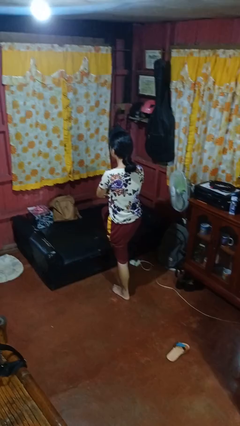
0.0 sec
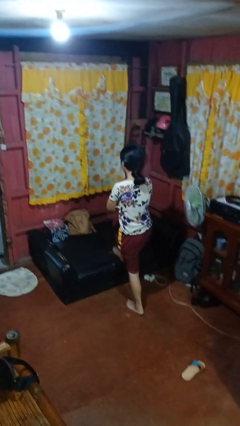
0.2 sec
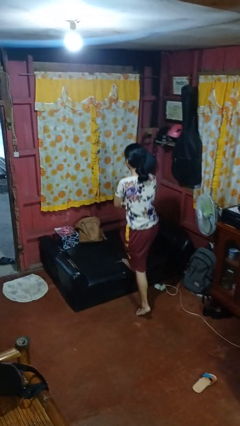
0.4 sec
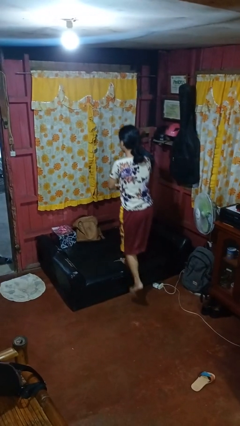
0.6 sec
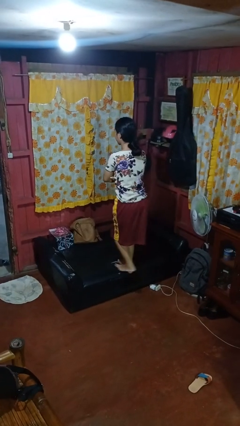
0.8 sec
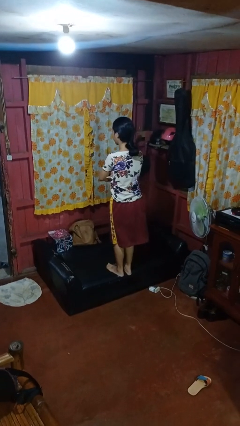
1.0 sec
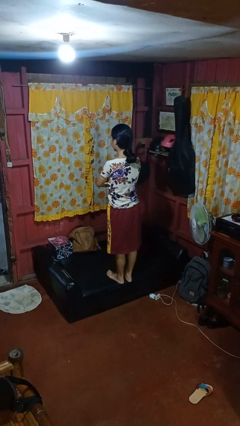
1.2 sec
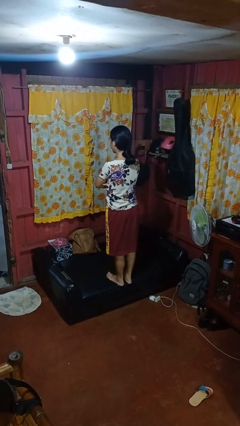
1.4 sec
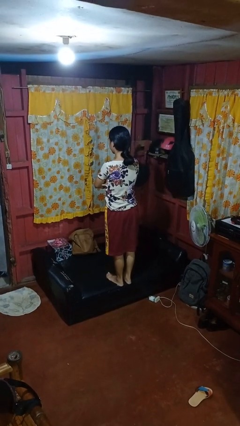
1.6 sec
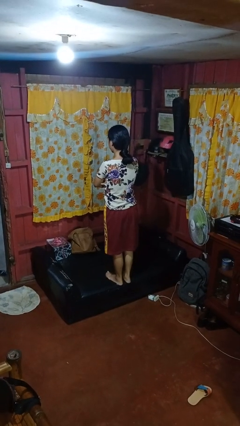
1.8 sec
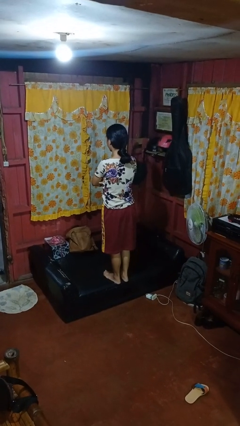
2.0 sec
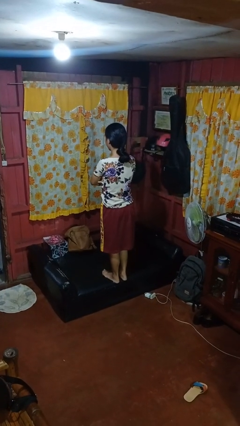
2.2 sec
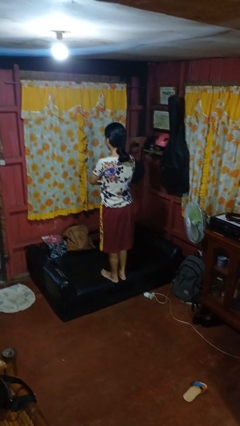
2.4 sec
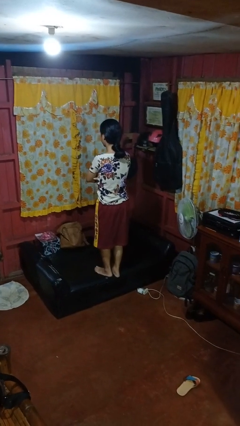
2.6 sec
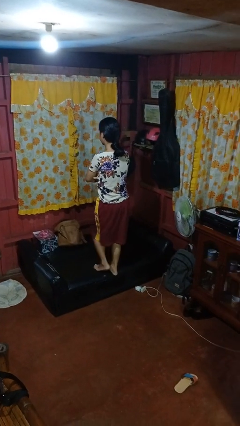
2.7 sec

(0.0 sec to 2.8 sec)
person climbs on couch

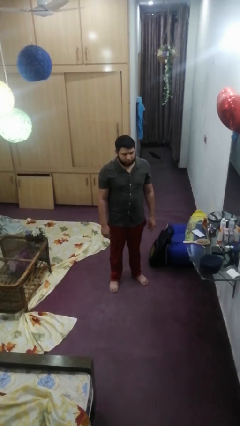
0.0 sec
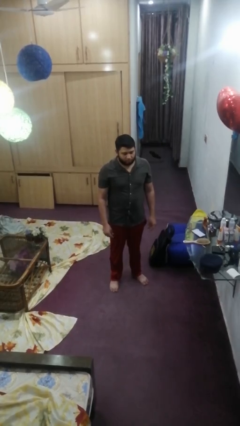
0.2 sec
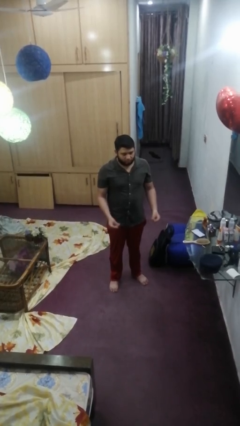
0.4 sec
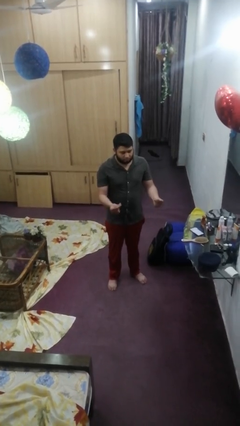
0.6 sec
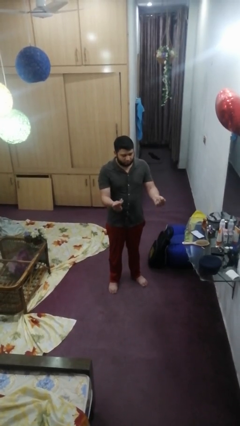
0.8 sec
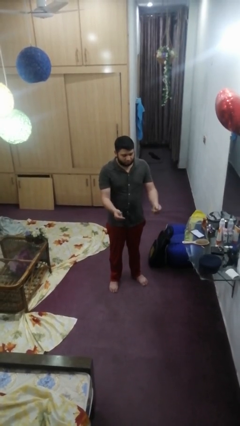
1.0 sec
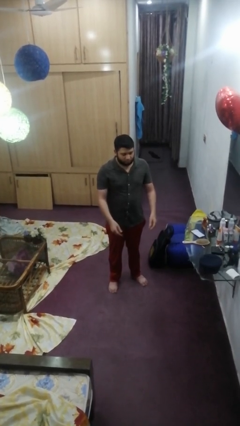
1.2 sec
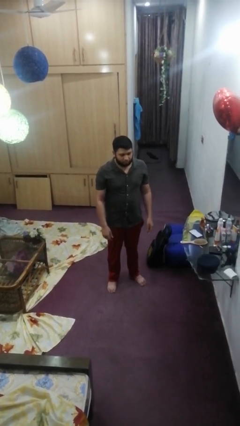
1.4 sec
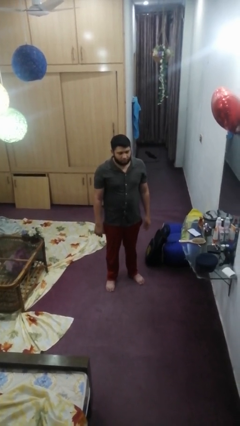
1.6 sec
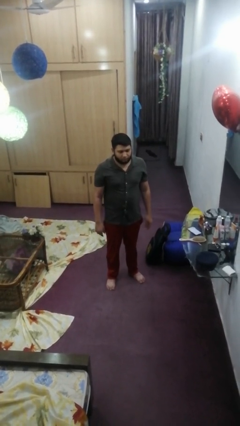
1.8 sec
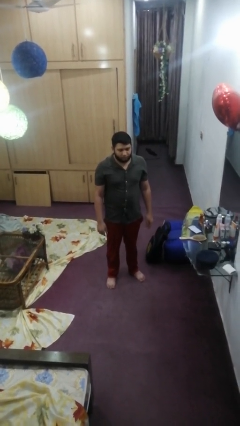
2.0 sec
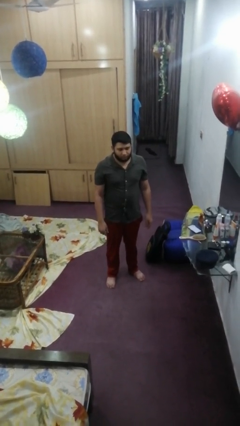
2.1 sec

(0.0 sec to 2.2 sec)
person snaps fingers

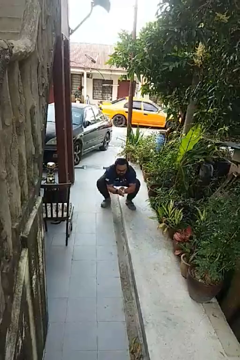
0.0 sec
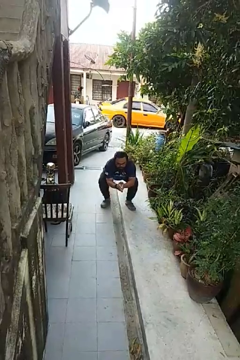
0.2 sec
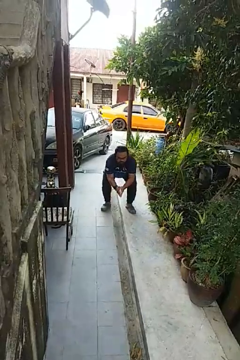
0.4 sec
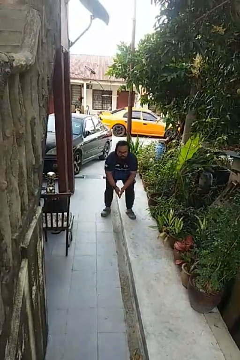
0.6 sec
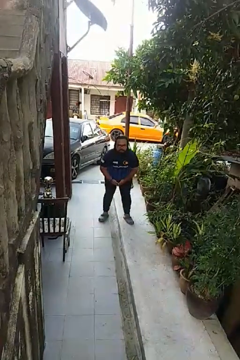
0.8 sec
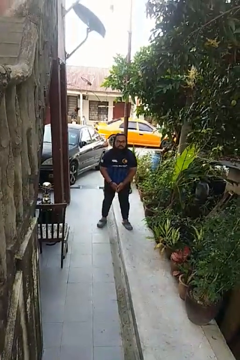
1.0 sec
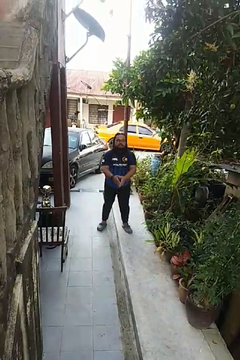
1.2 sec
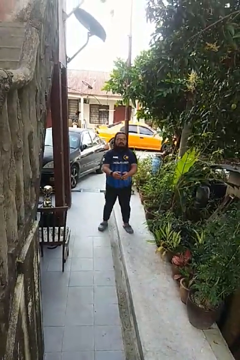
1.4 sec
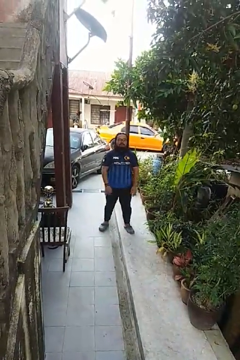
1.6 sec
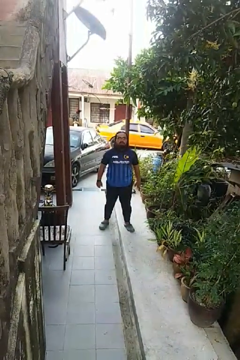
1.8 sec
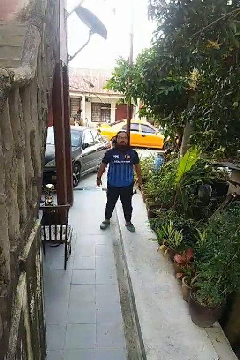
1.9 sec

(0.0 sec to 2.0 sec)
person stands up

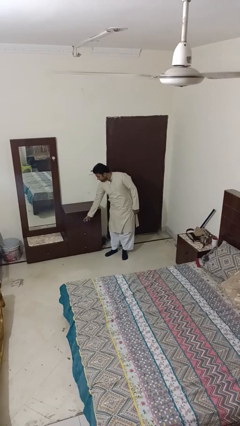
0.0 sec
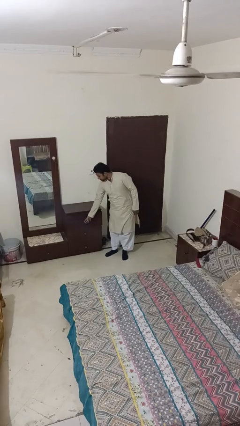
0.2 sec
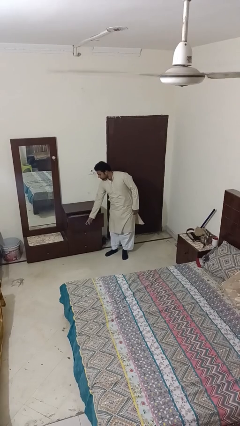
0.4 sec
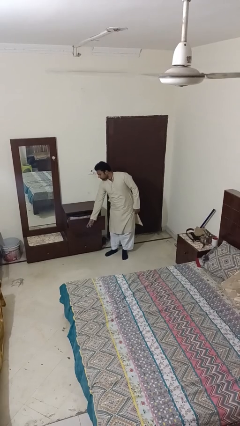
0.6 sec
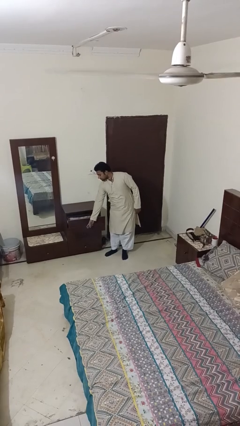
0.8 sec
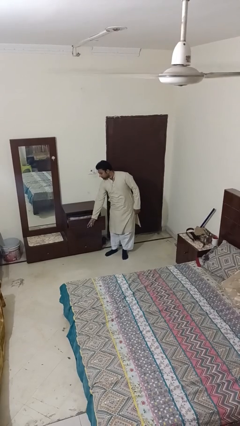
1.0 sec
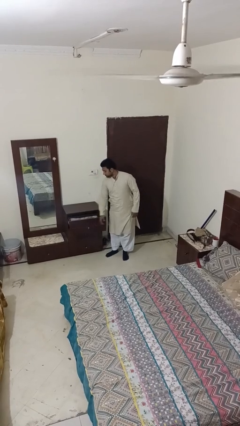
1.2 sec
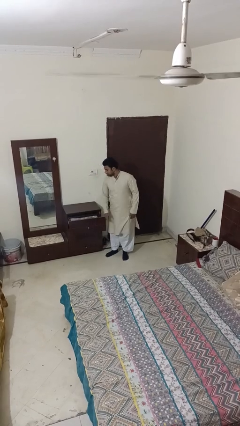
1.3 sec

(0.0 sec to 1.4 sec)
person opens dresser drawer

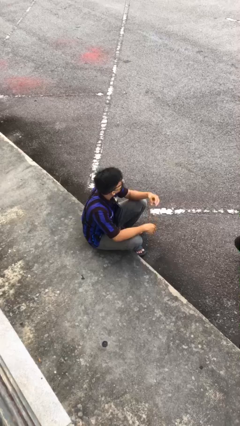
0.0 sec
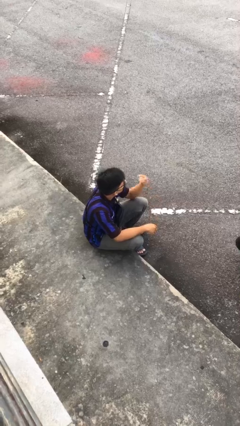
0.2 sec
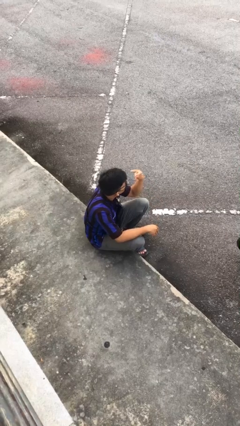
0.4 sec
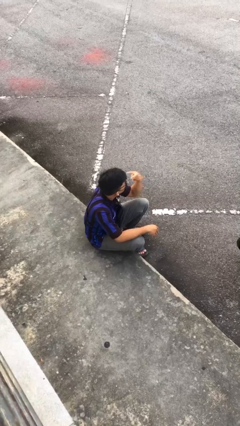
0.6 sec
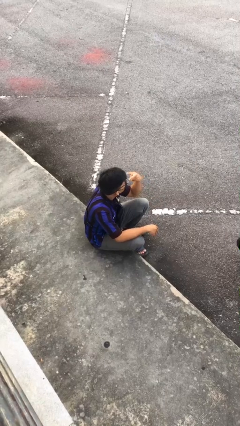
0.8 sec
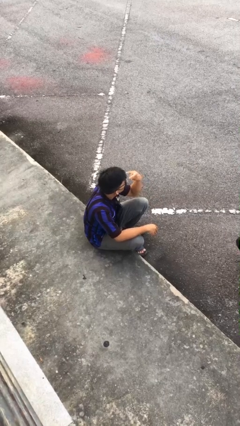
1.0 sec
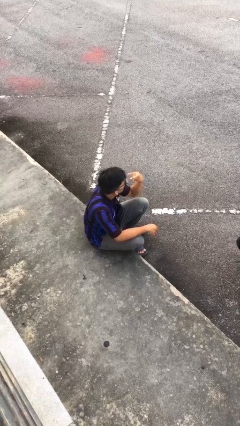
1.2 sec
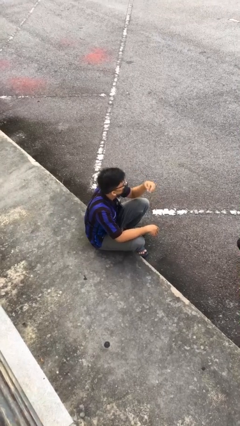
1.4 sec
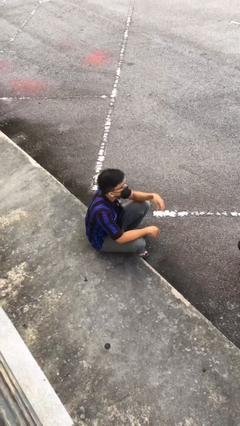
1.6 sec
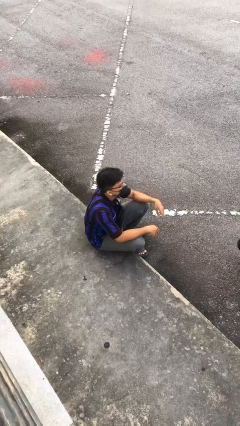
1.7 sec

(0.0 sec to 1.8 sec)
person gestures watch closely

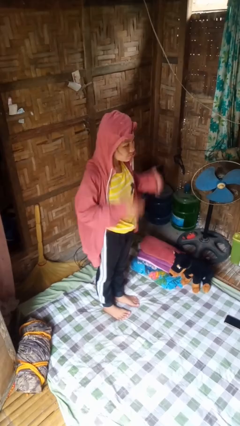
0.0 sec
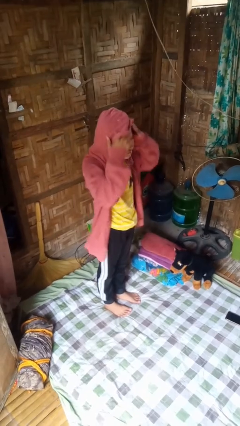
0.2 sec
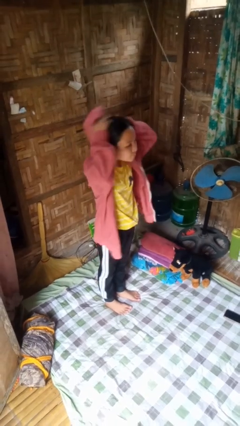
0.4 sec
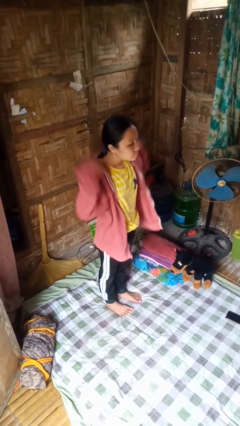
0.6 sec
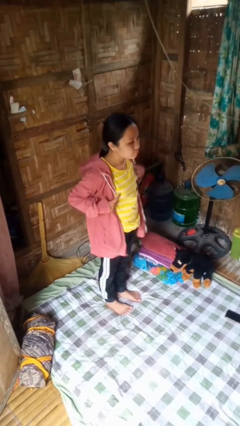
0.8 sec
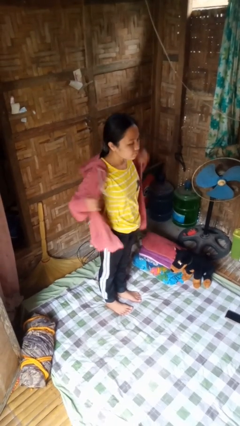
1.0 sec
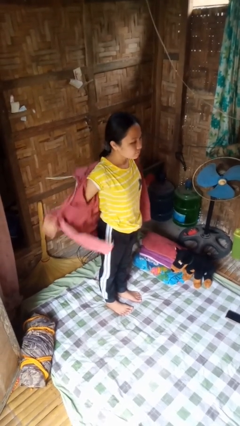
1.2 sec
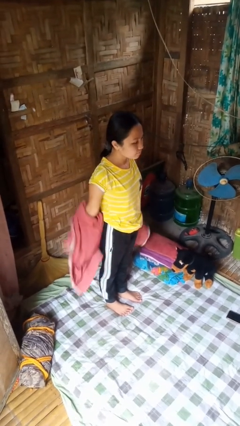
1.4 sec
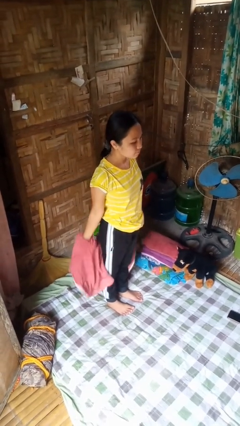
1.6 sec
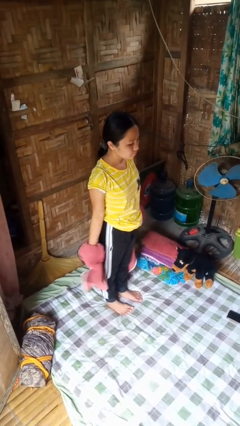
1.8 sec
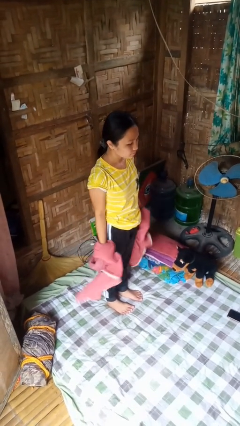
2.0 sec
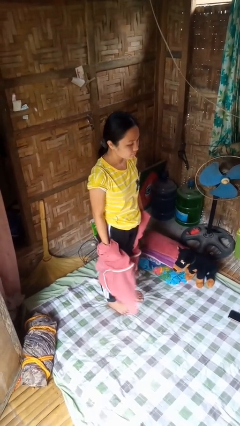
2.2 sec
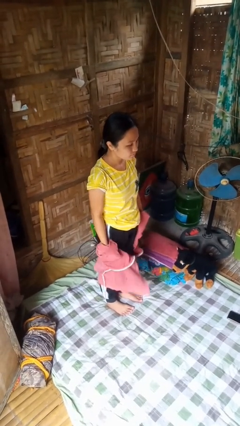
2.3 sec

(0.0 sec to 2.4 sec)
person takes off hoodie

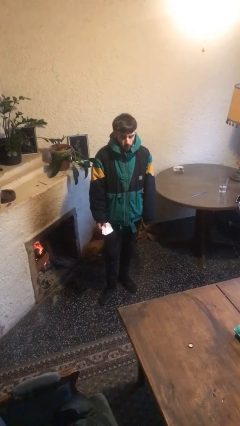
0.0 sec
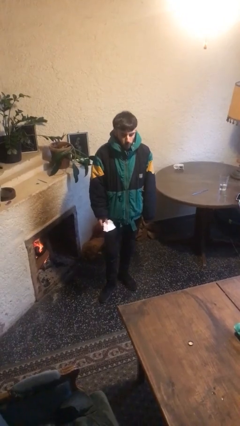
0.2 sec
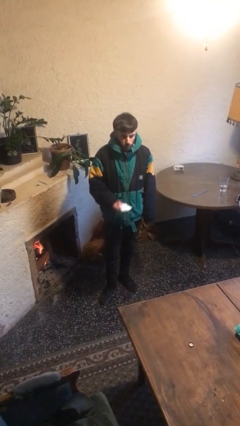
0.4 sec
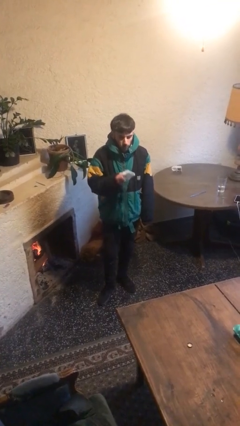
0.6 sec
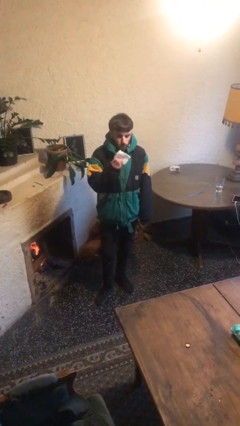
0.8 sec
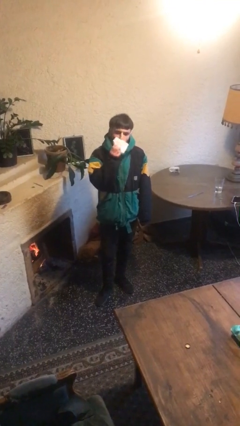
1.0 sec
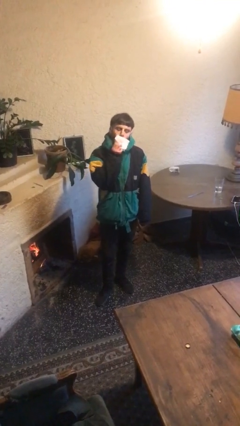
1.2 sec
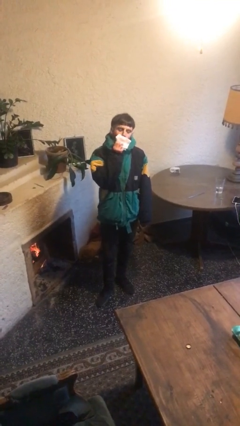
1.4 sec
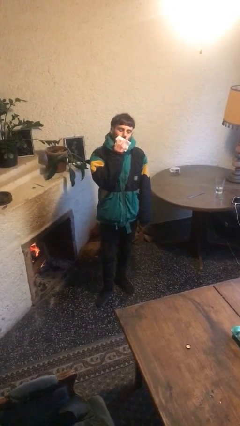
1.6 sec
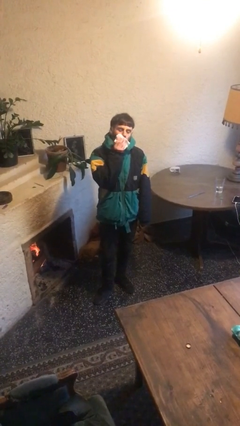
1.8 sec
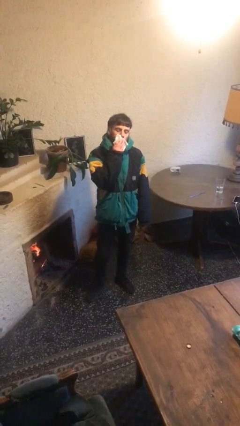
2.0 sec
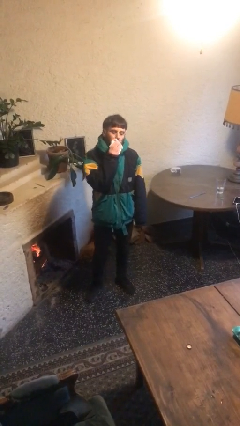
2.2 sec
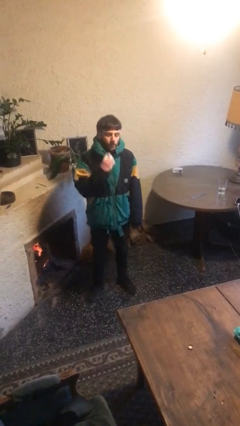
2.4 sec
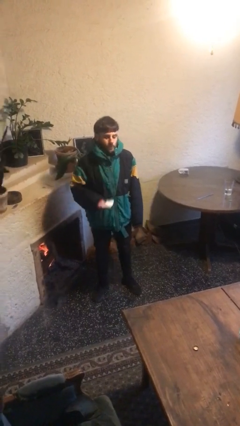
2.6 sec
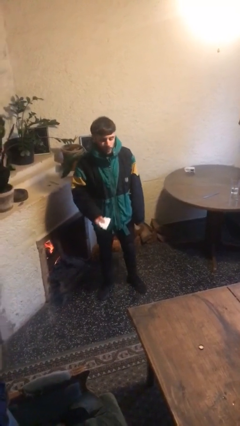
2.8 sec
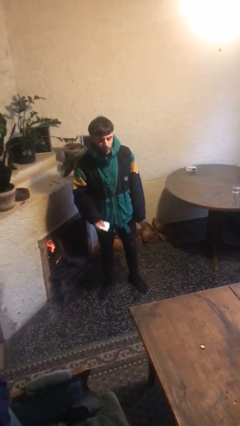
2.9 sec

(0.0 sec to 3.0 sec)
person wipes mouth with napkin

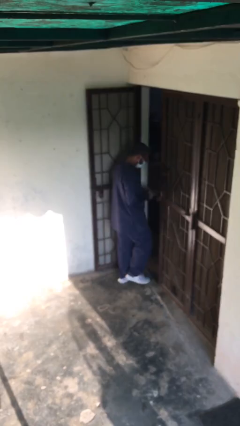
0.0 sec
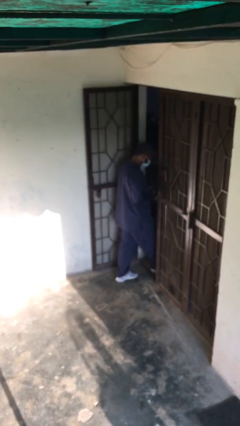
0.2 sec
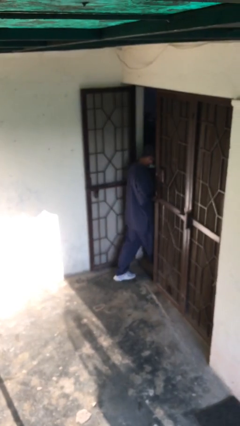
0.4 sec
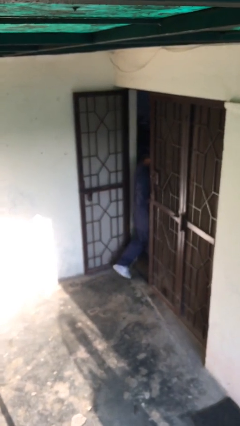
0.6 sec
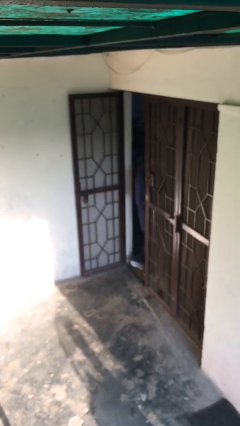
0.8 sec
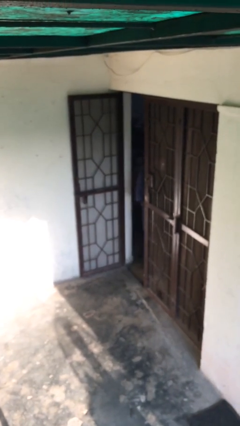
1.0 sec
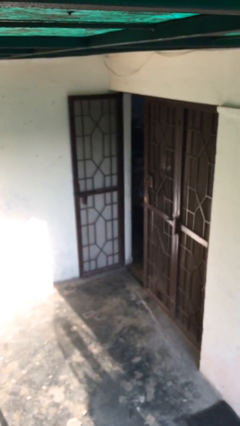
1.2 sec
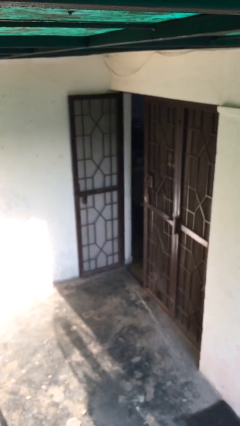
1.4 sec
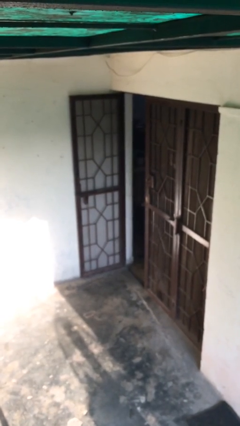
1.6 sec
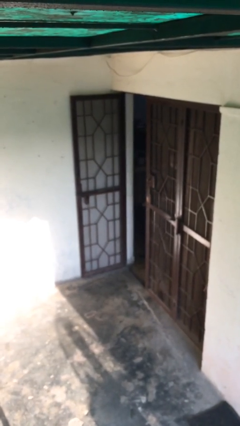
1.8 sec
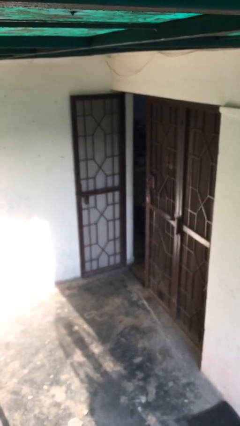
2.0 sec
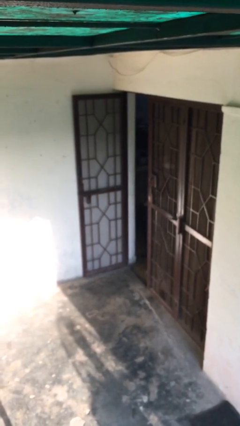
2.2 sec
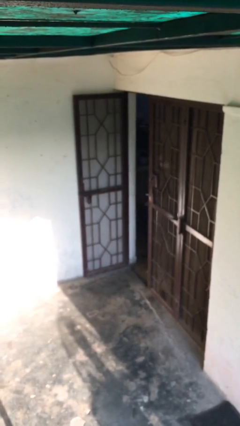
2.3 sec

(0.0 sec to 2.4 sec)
person exits scene through structure
